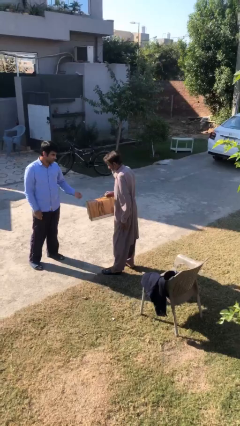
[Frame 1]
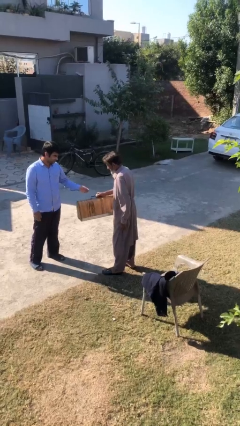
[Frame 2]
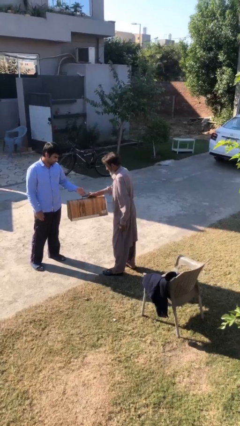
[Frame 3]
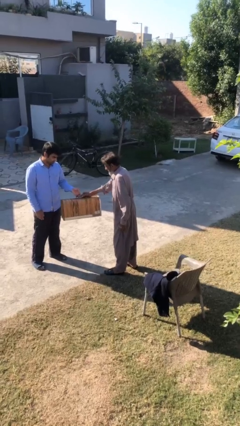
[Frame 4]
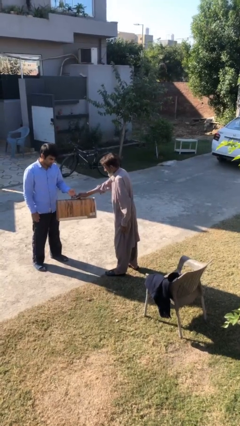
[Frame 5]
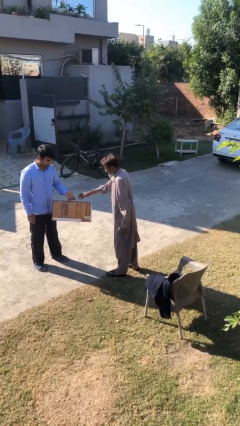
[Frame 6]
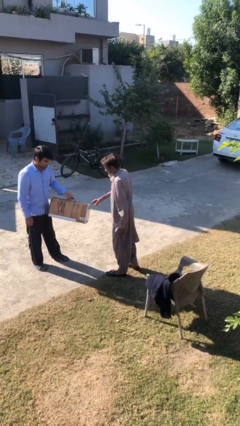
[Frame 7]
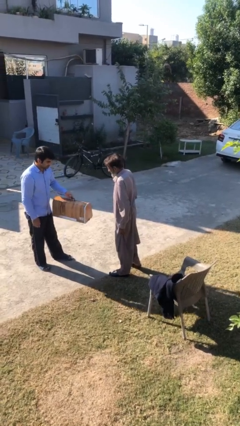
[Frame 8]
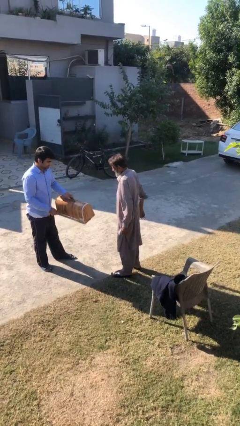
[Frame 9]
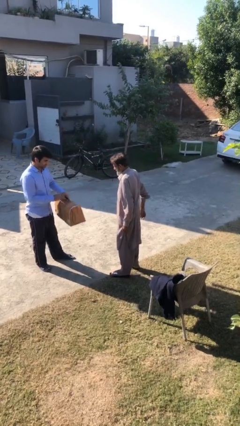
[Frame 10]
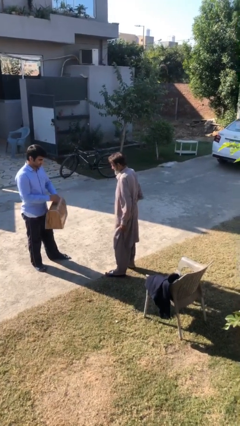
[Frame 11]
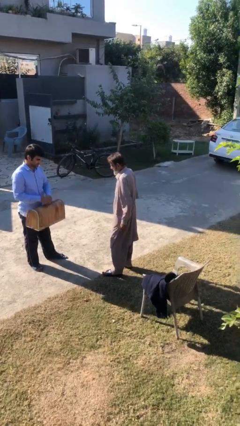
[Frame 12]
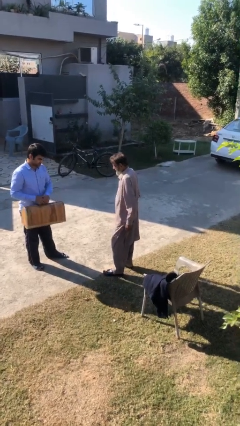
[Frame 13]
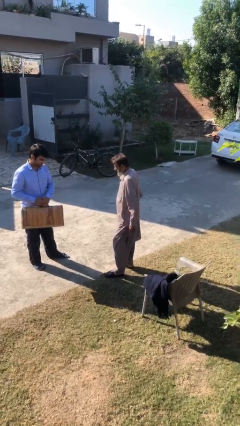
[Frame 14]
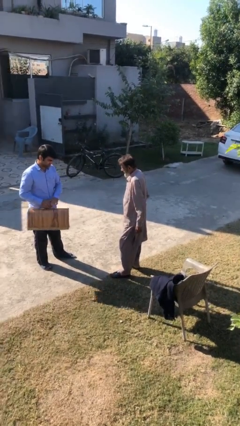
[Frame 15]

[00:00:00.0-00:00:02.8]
person transfers object to person

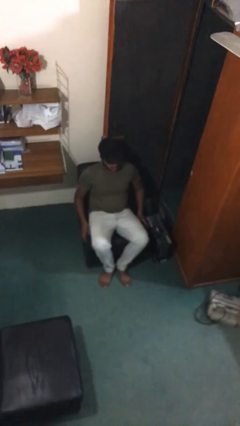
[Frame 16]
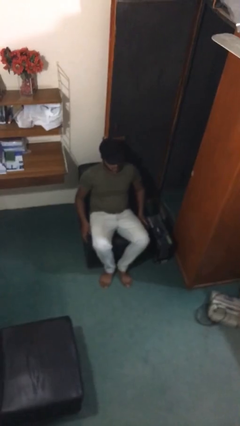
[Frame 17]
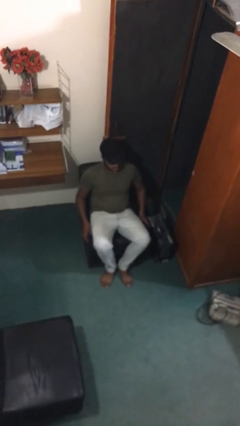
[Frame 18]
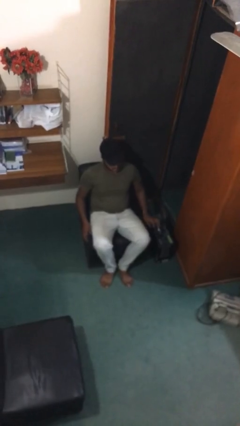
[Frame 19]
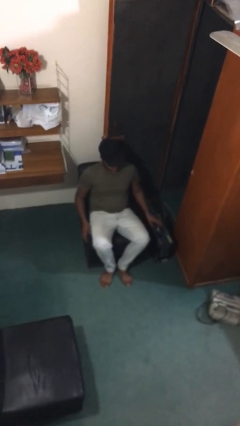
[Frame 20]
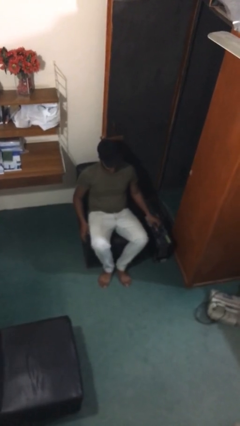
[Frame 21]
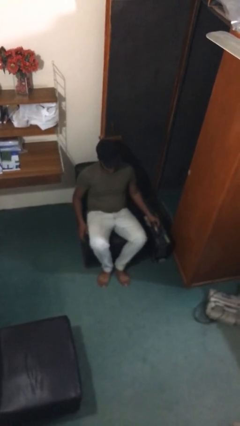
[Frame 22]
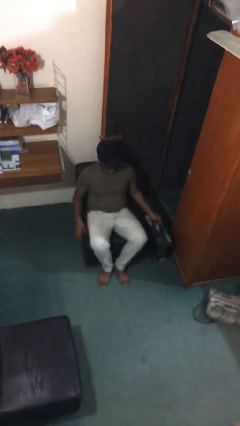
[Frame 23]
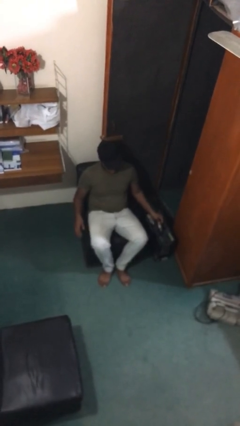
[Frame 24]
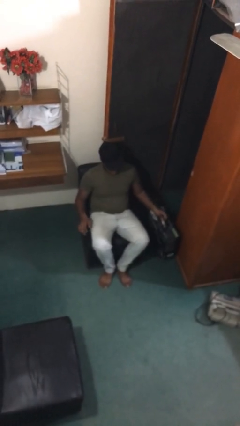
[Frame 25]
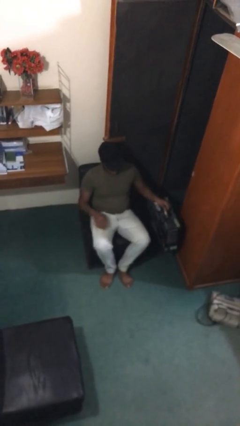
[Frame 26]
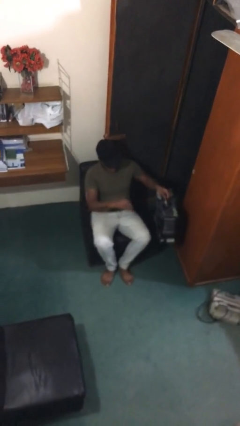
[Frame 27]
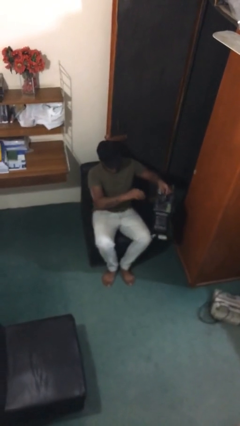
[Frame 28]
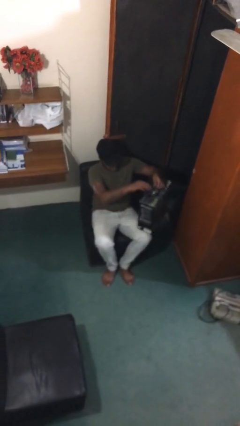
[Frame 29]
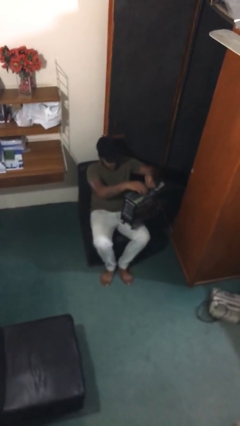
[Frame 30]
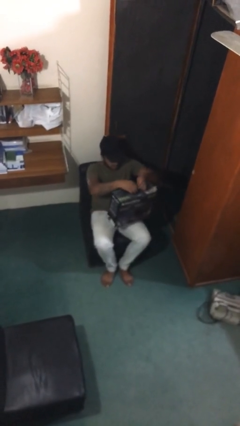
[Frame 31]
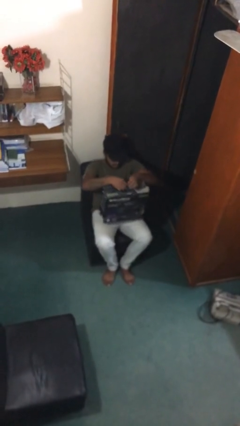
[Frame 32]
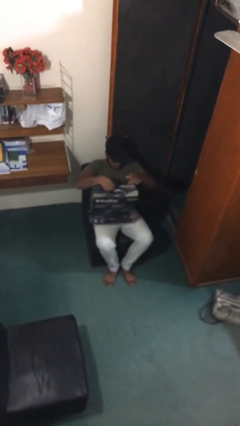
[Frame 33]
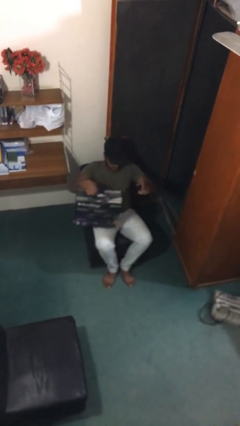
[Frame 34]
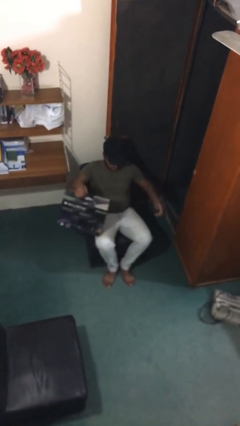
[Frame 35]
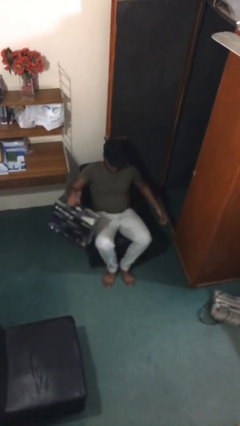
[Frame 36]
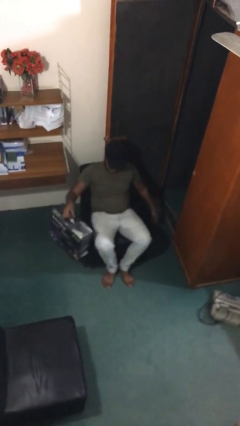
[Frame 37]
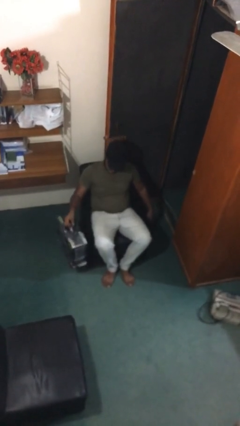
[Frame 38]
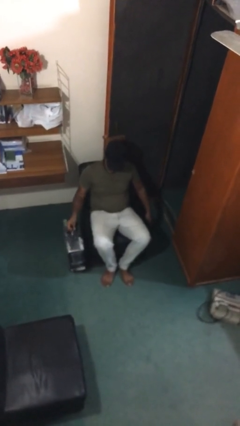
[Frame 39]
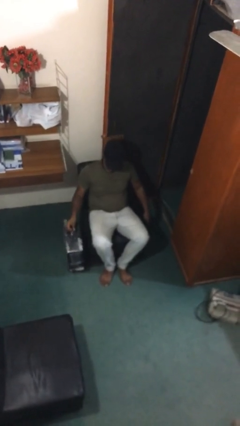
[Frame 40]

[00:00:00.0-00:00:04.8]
person picks up object from floor

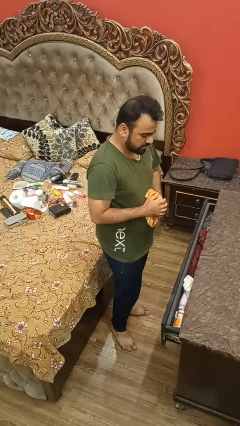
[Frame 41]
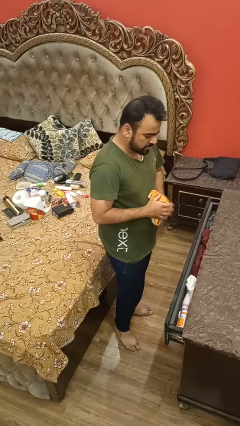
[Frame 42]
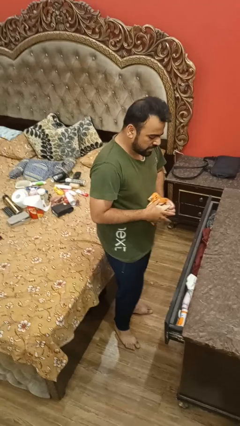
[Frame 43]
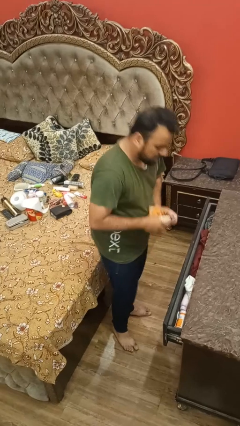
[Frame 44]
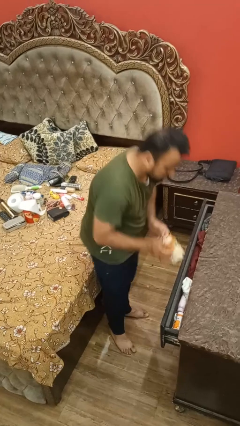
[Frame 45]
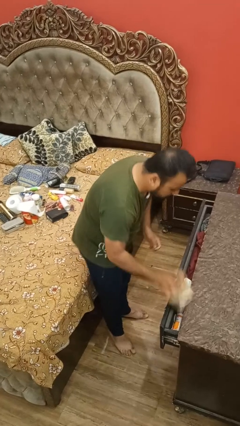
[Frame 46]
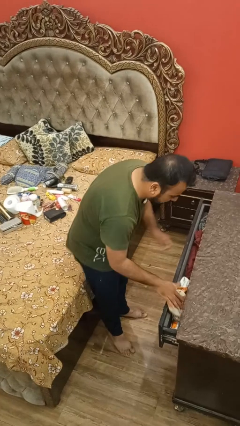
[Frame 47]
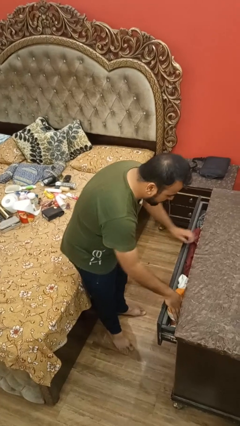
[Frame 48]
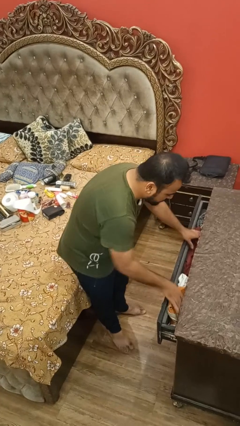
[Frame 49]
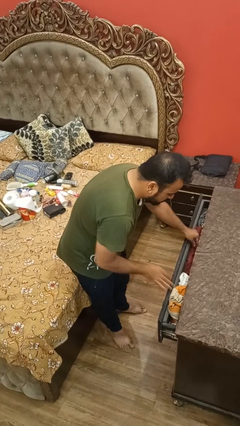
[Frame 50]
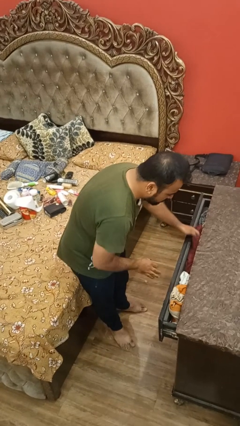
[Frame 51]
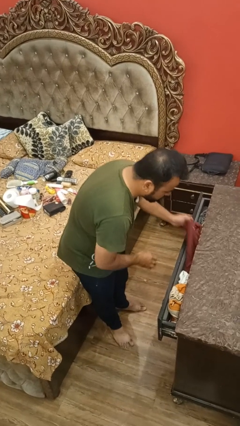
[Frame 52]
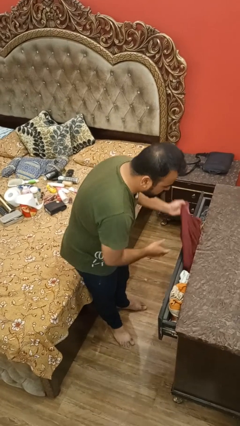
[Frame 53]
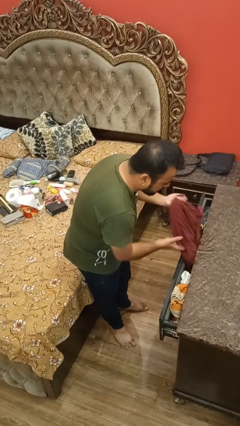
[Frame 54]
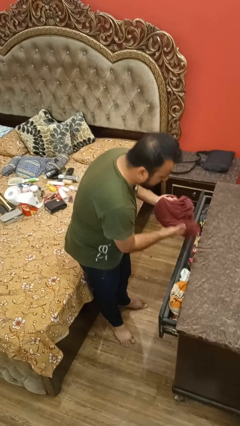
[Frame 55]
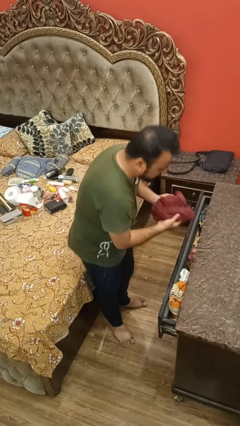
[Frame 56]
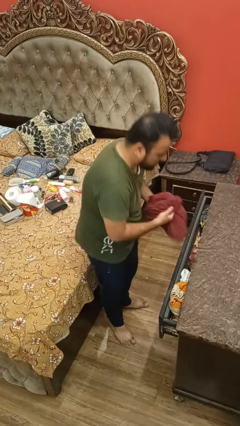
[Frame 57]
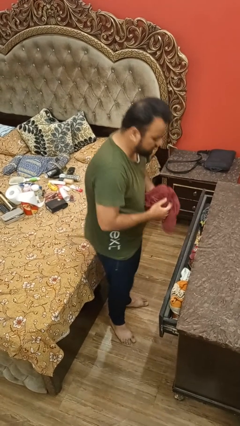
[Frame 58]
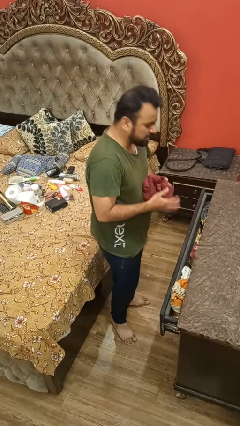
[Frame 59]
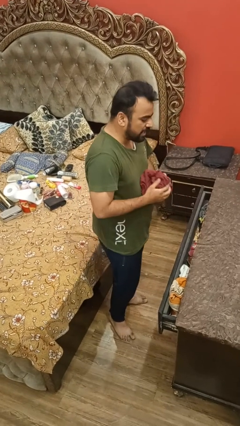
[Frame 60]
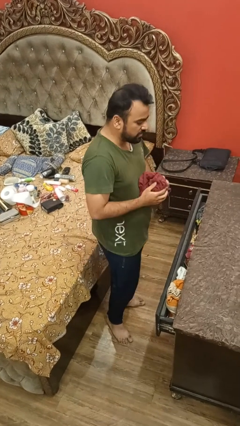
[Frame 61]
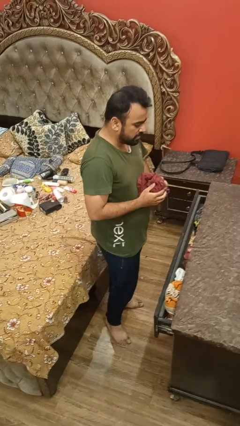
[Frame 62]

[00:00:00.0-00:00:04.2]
person puts clothes into dresser

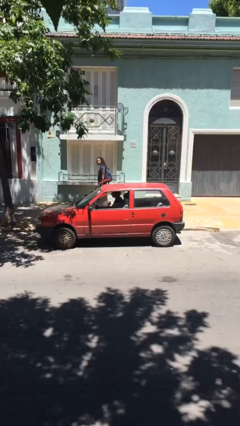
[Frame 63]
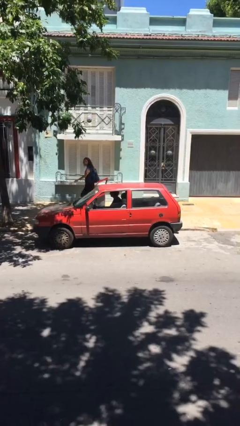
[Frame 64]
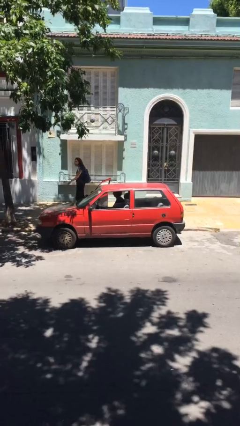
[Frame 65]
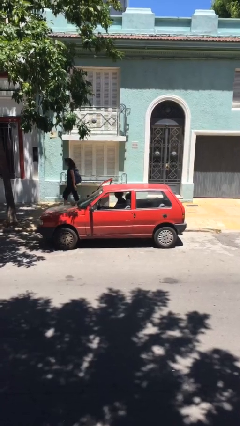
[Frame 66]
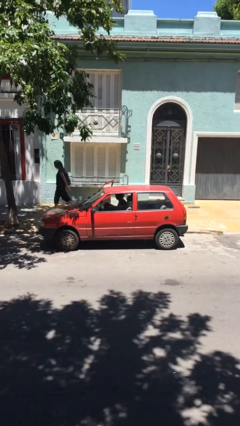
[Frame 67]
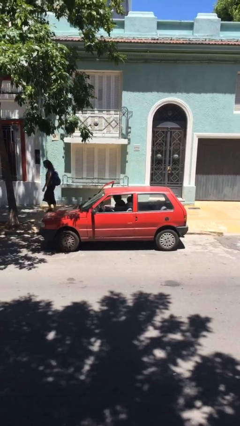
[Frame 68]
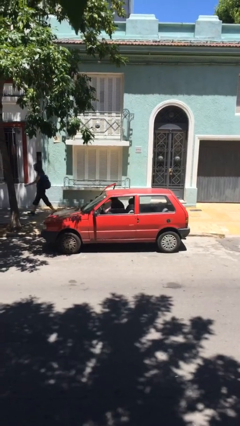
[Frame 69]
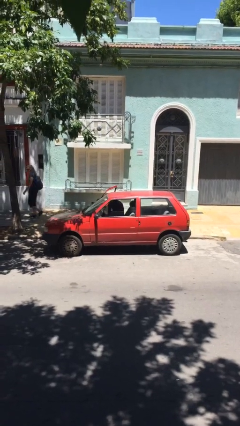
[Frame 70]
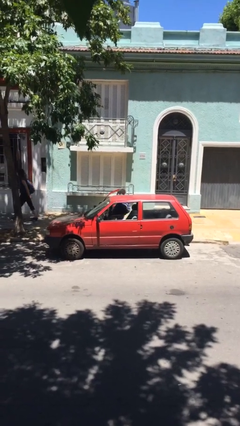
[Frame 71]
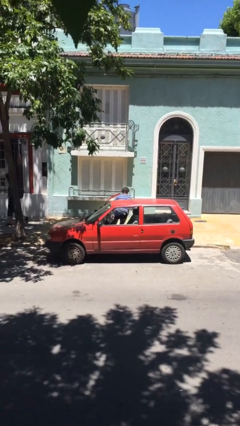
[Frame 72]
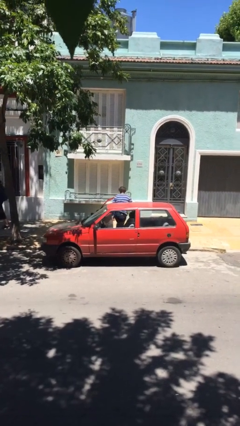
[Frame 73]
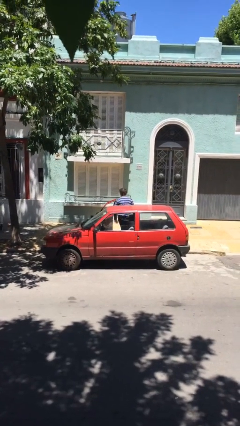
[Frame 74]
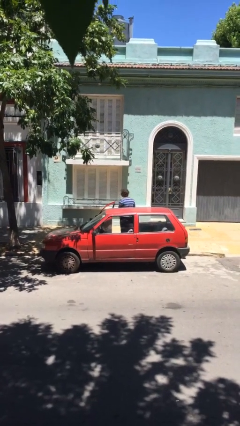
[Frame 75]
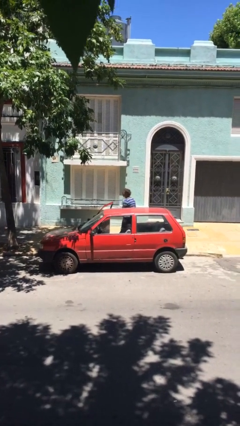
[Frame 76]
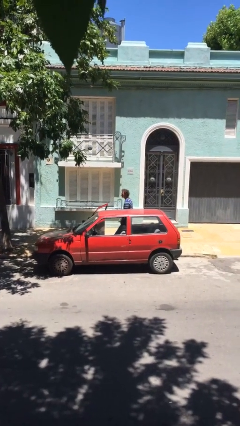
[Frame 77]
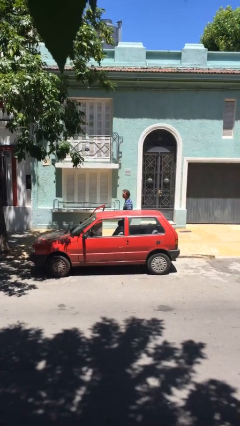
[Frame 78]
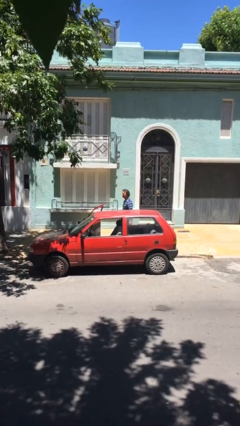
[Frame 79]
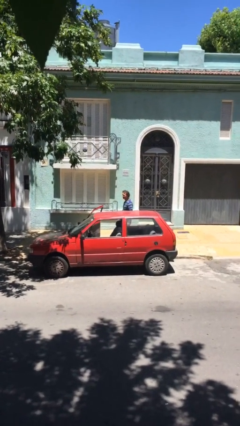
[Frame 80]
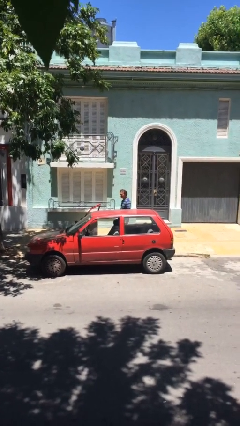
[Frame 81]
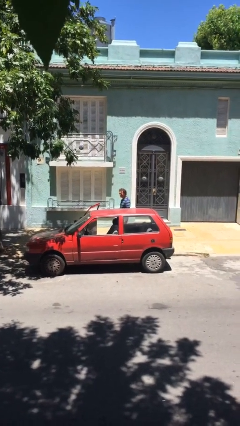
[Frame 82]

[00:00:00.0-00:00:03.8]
person exits car

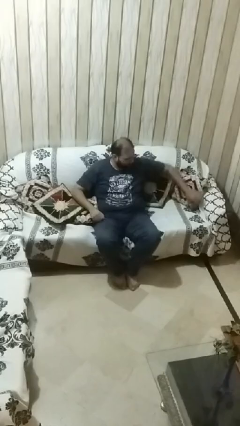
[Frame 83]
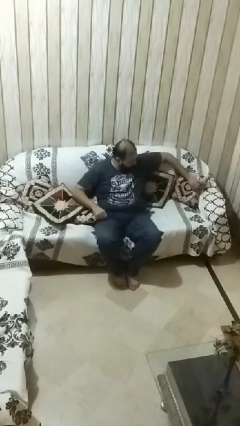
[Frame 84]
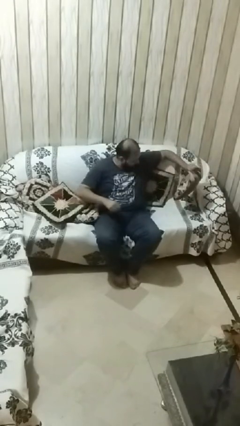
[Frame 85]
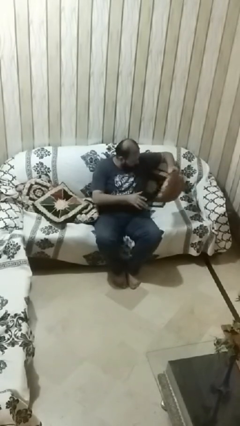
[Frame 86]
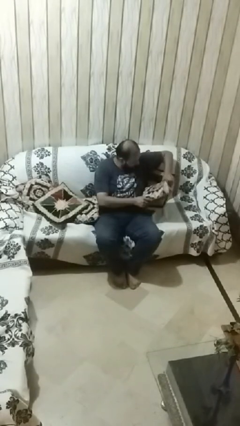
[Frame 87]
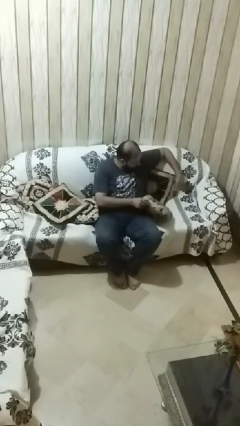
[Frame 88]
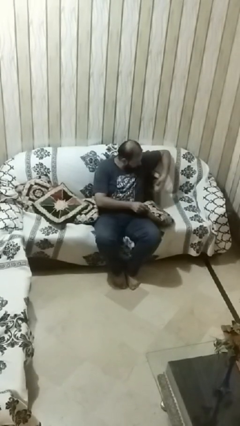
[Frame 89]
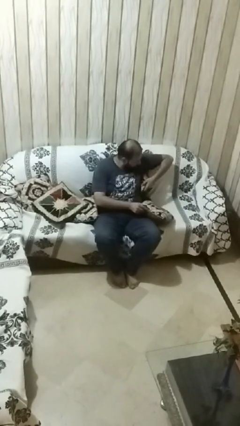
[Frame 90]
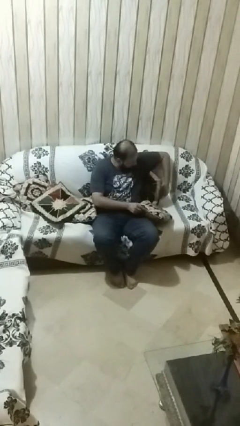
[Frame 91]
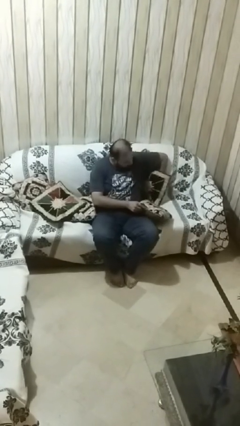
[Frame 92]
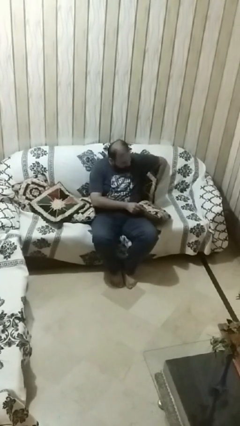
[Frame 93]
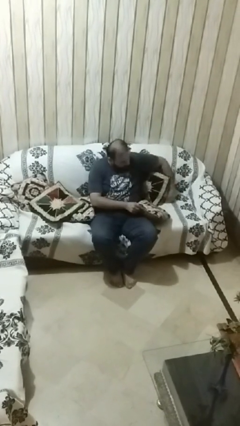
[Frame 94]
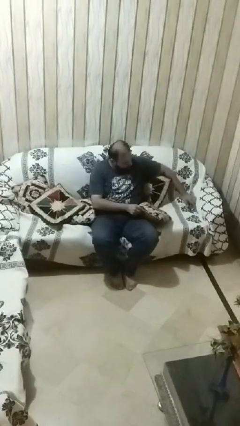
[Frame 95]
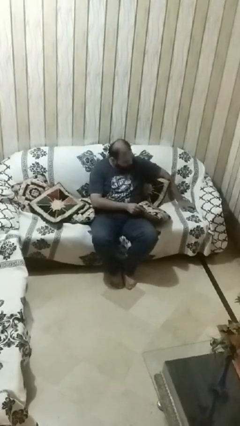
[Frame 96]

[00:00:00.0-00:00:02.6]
person searches in couch
